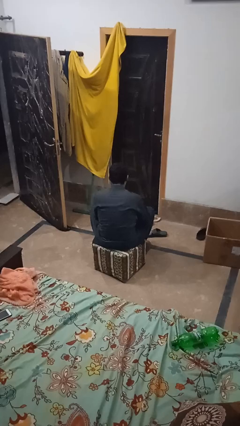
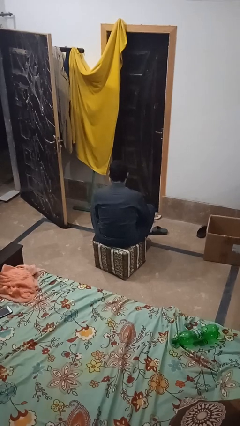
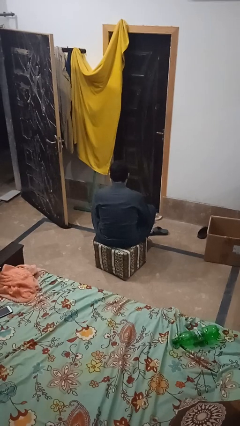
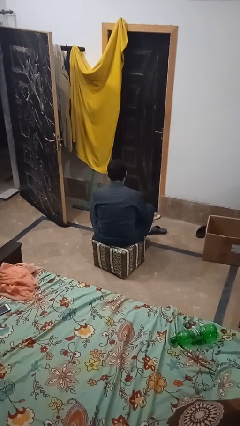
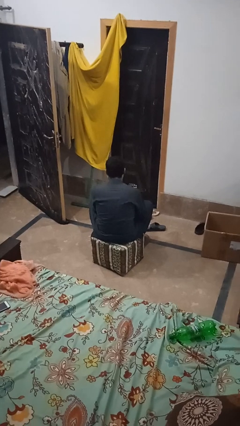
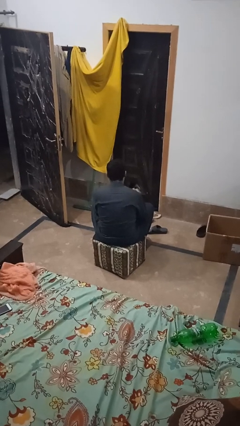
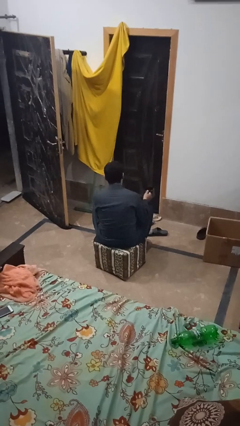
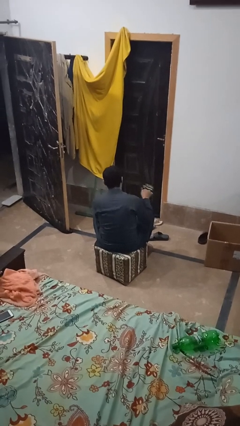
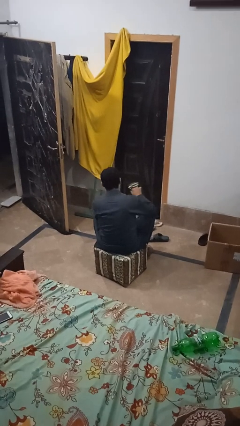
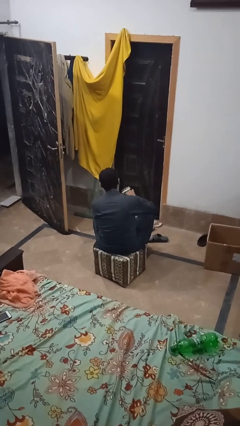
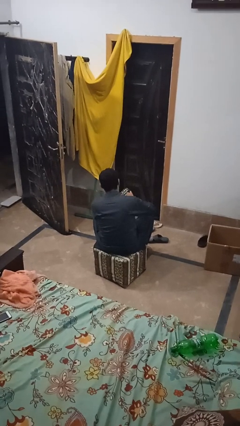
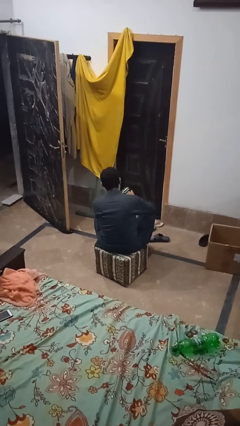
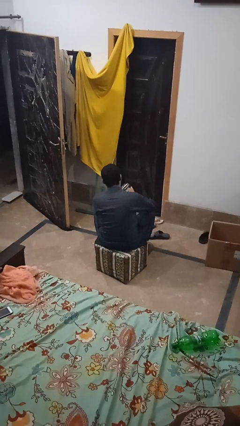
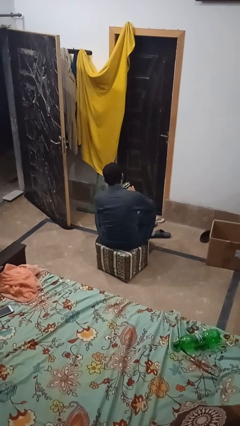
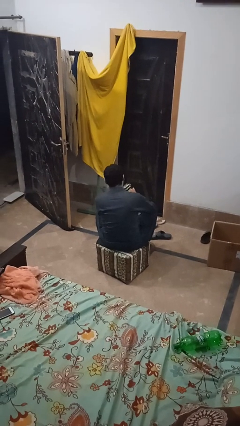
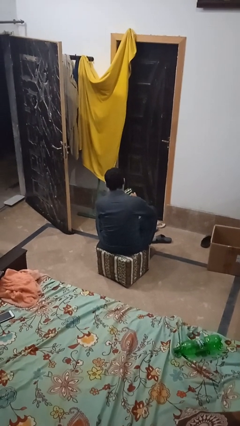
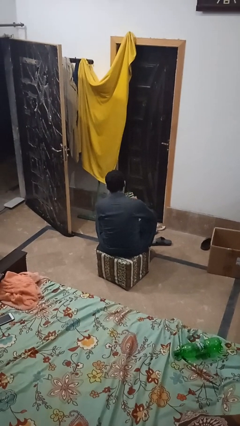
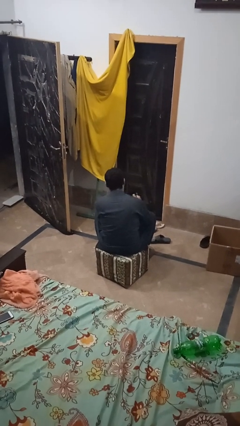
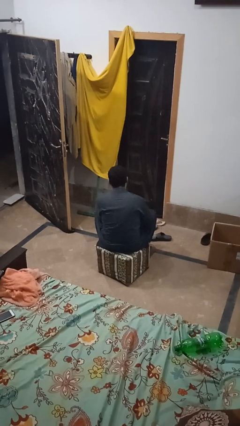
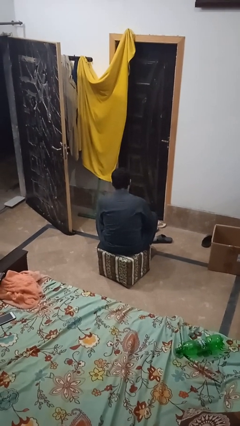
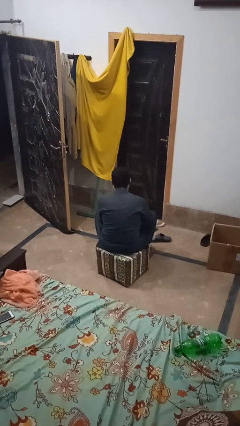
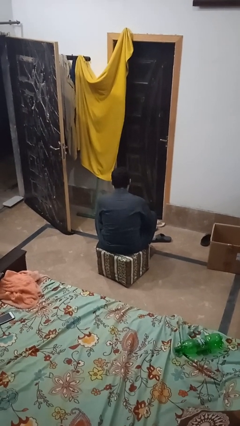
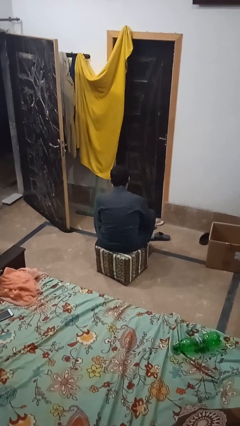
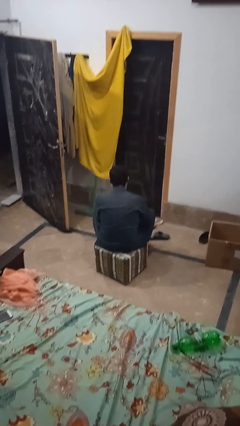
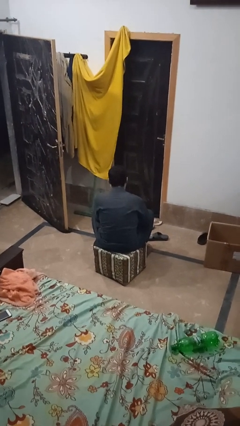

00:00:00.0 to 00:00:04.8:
person pours coffee into mug

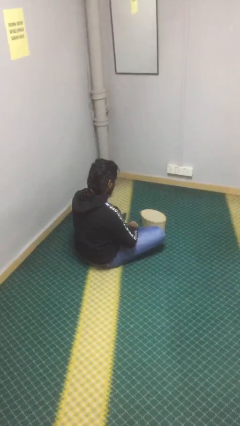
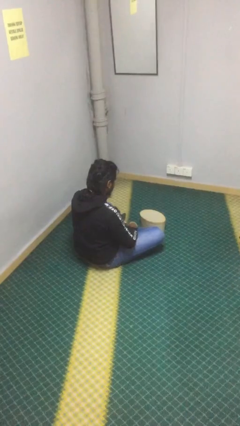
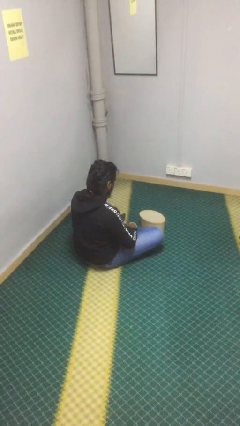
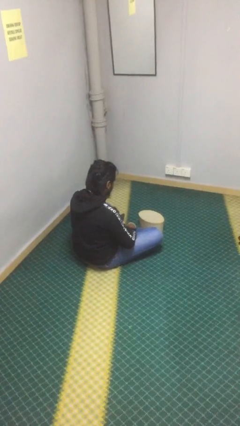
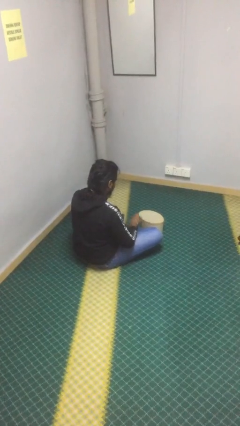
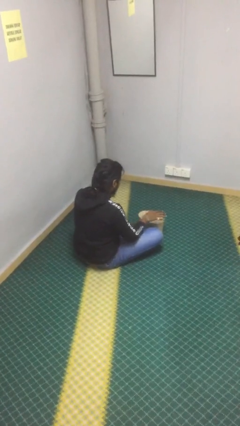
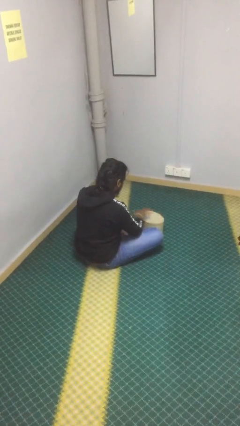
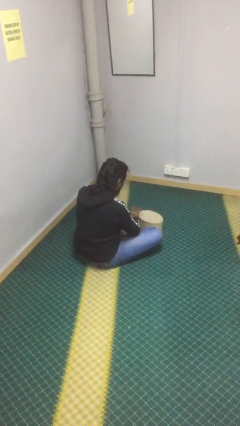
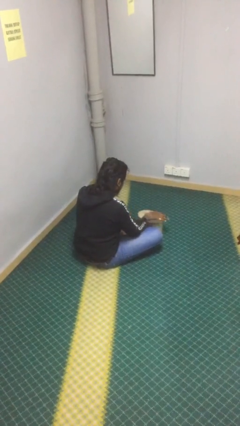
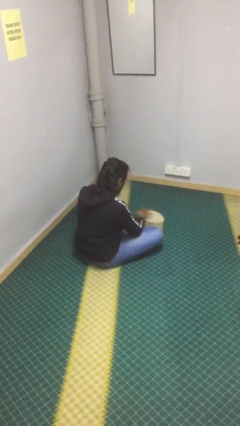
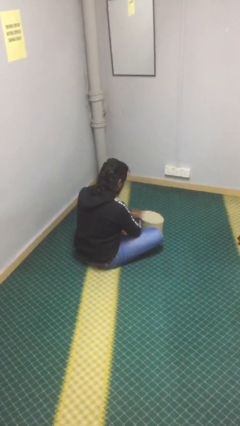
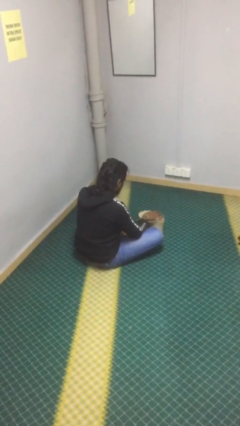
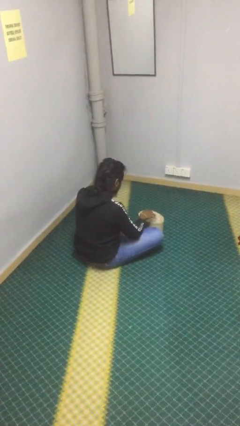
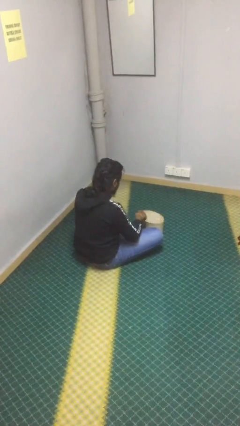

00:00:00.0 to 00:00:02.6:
person waves hand over object

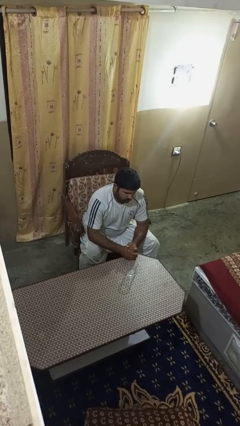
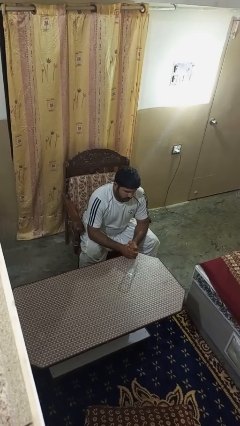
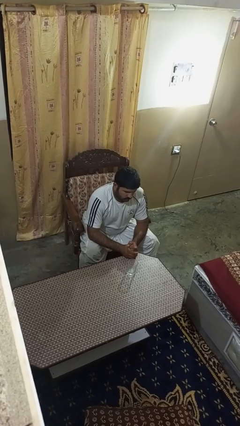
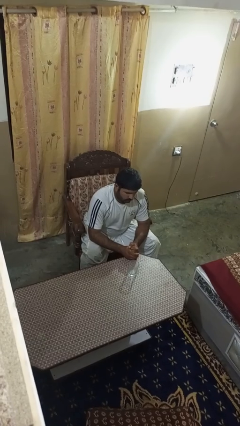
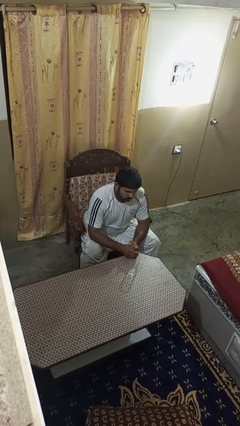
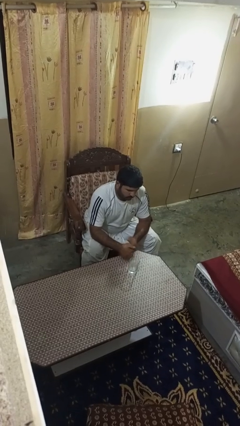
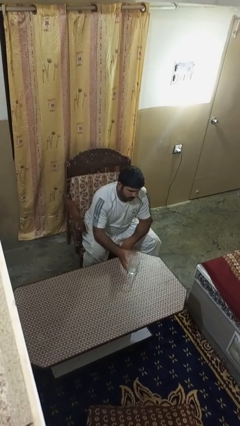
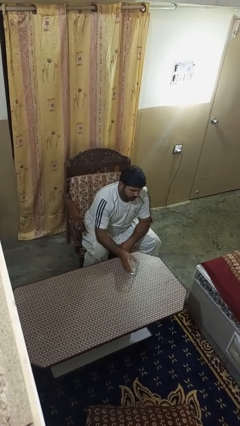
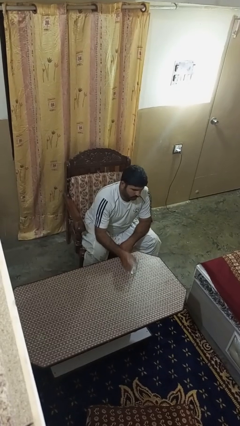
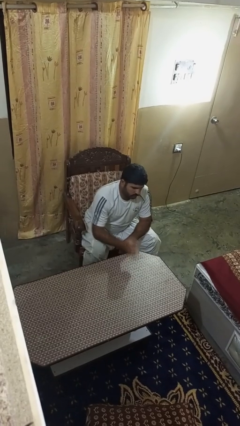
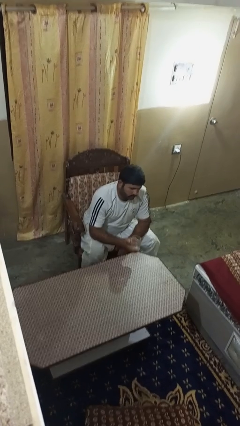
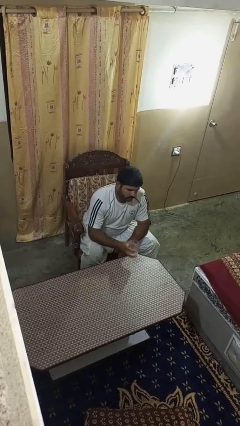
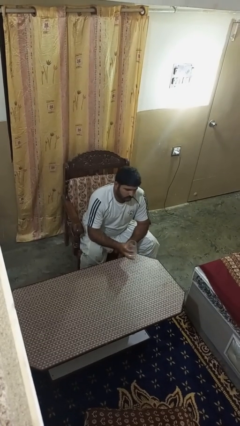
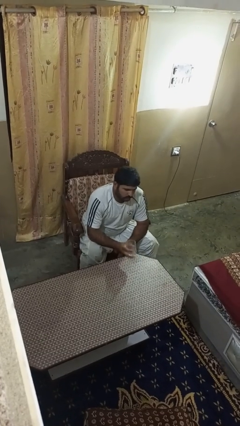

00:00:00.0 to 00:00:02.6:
person picks up object from table

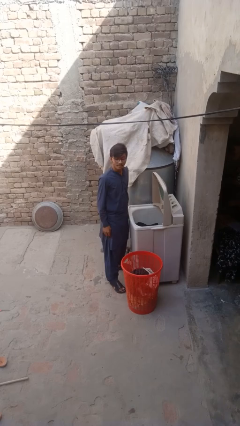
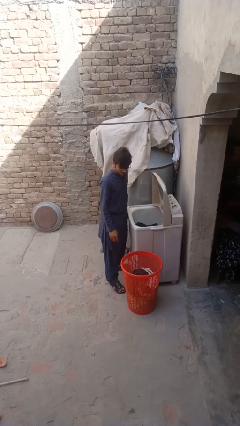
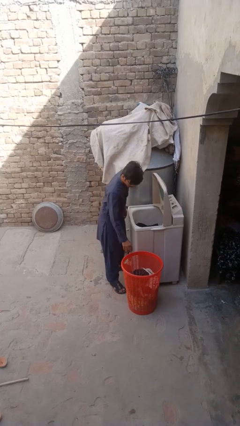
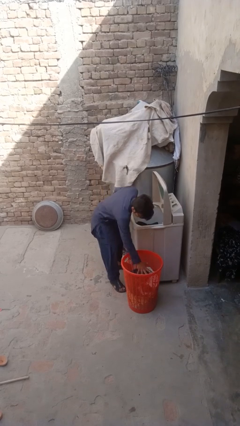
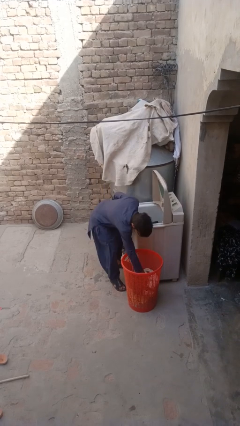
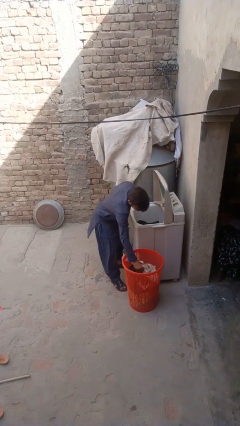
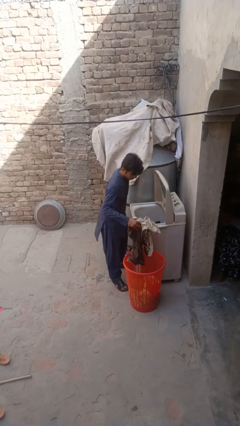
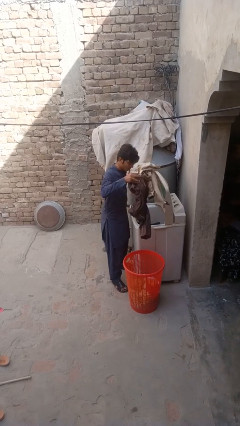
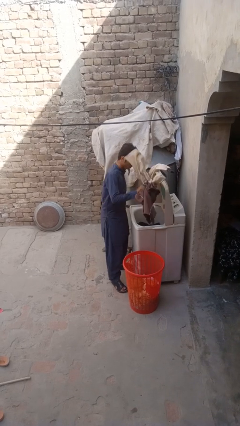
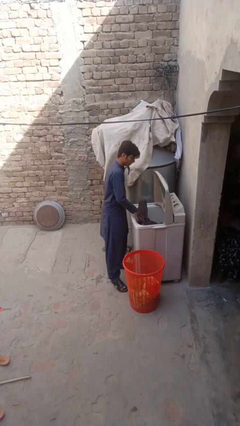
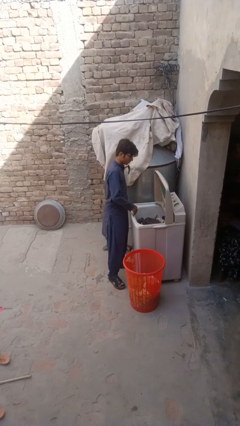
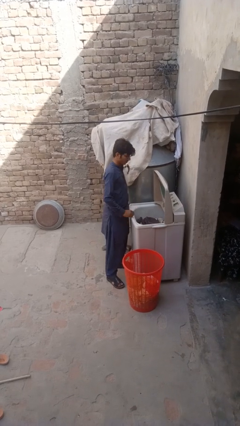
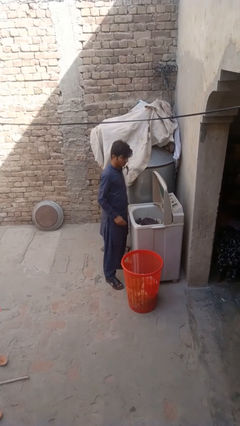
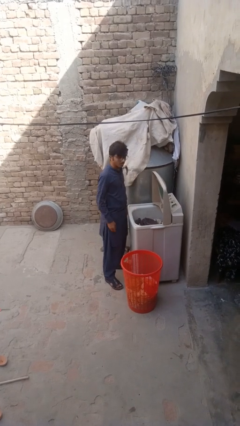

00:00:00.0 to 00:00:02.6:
person loads clotheswasher

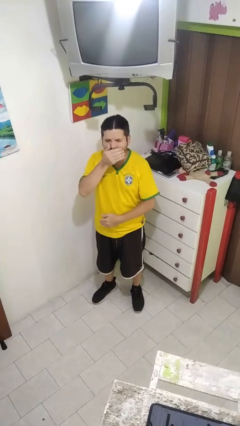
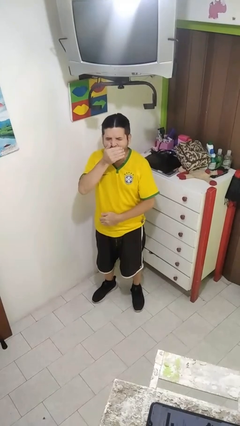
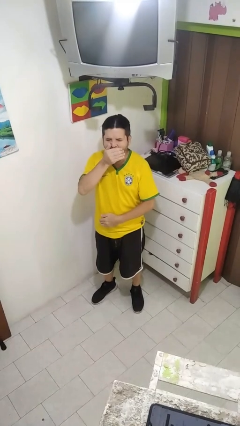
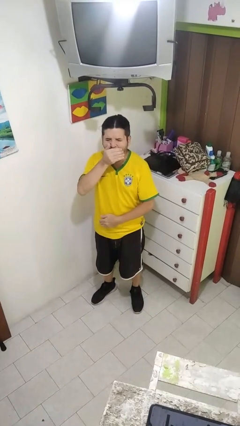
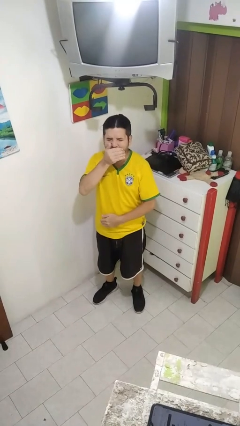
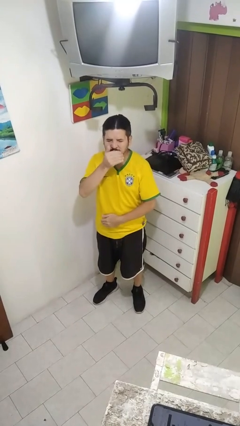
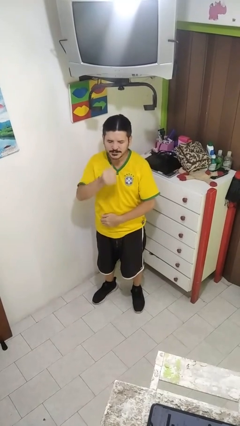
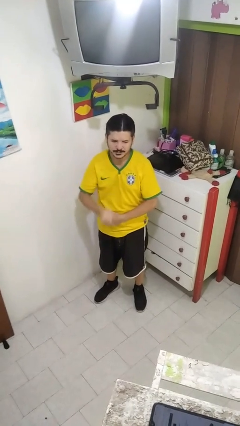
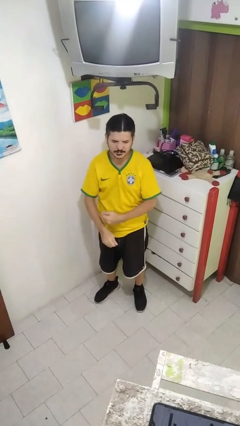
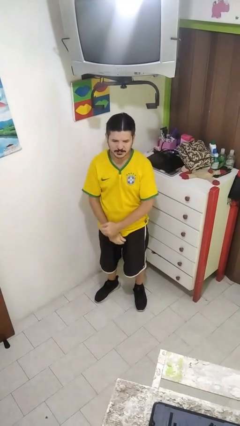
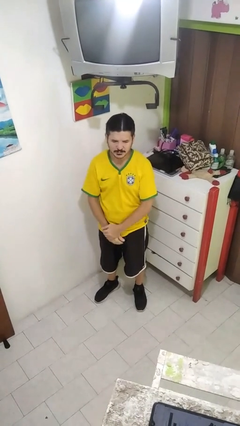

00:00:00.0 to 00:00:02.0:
person yawns

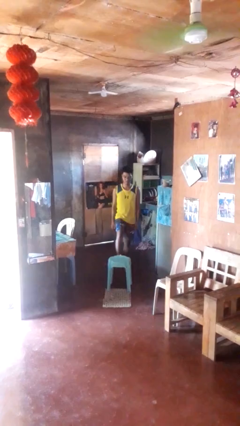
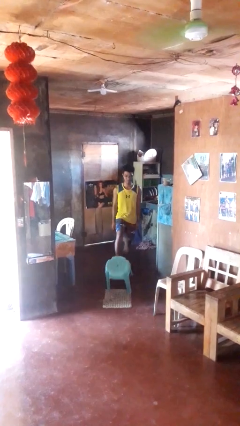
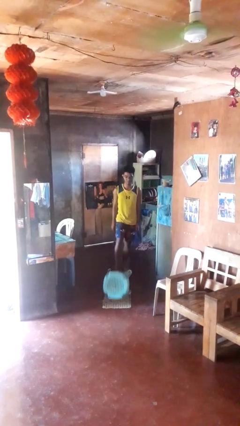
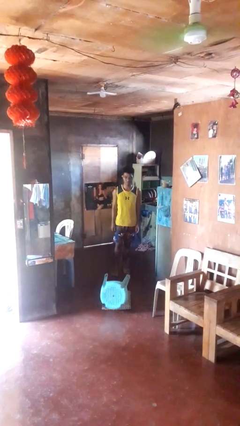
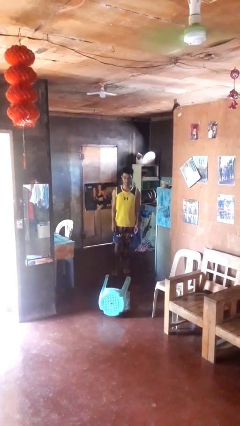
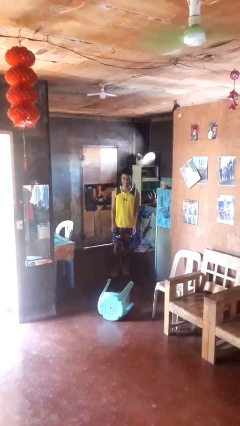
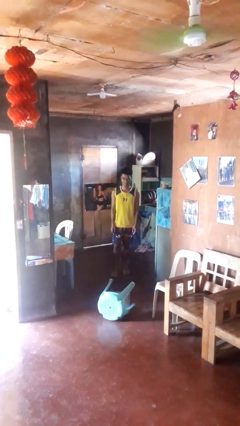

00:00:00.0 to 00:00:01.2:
person knocks over furniture

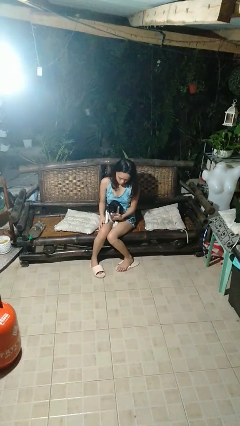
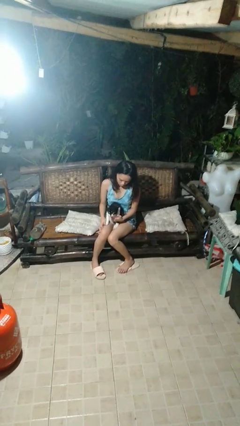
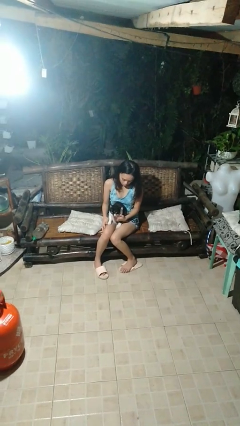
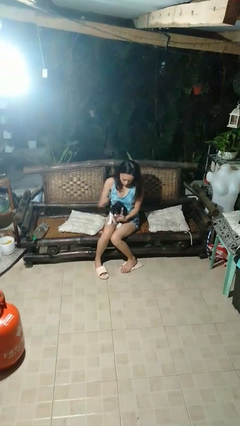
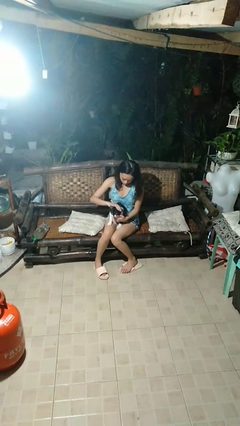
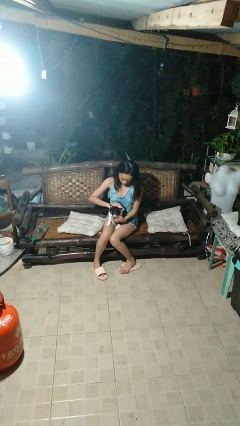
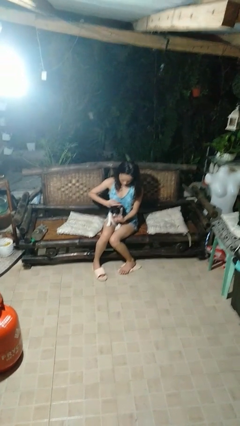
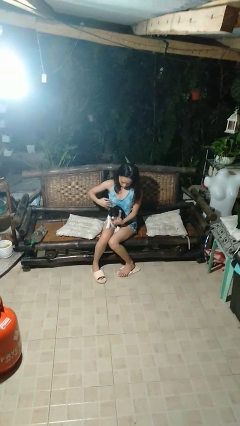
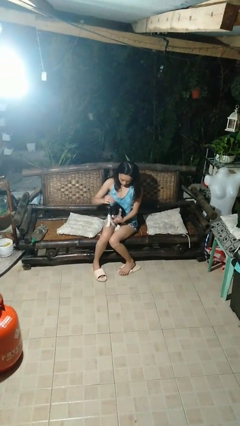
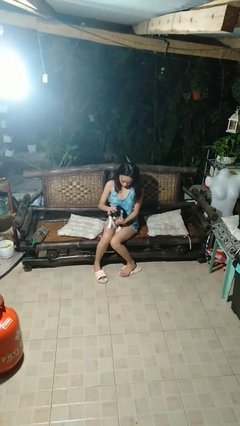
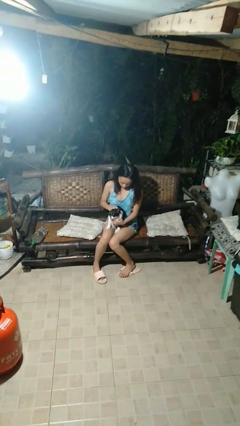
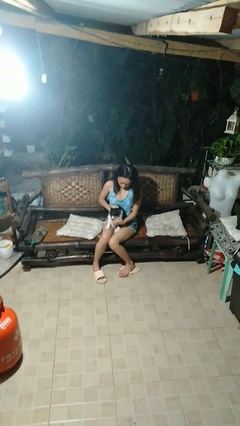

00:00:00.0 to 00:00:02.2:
person pets cat
